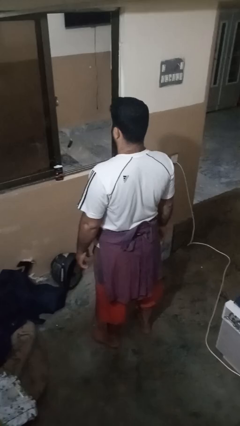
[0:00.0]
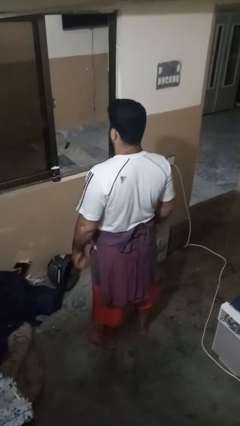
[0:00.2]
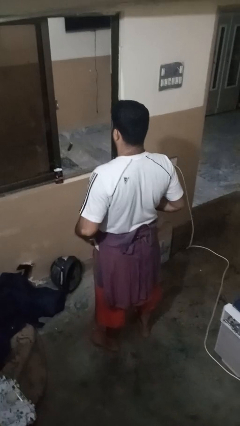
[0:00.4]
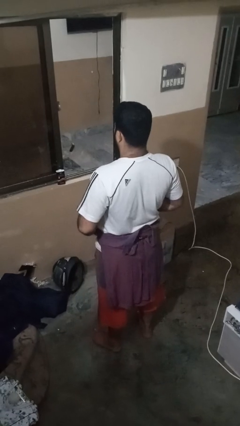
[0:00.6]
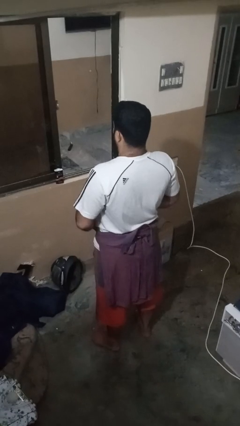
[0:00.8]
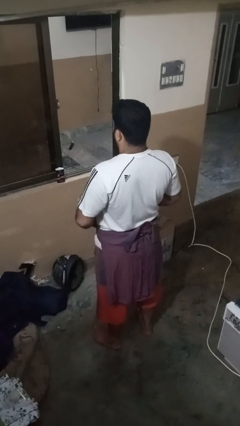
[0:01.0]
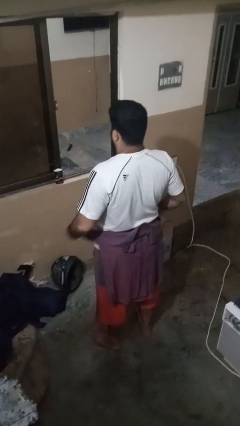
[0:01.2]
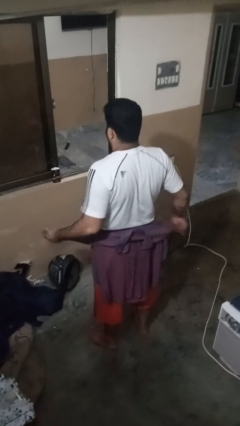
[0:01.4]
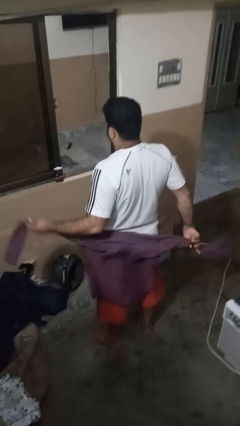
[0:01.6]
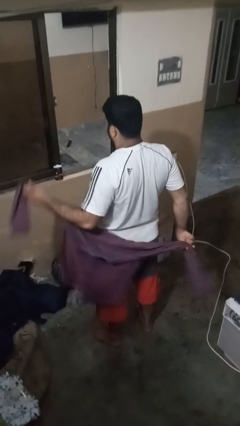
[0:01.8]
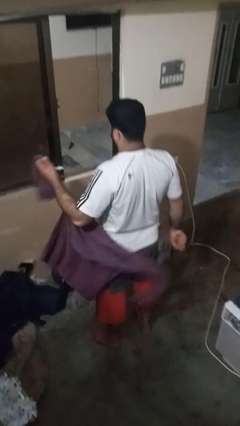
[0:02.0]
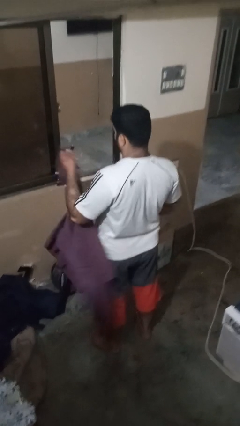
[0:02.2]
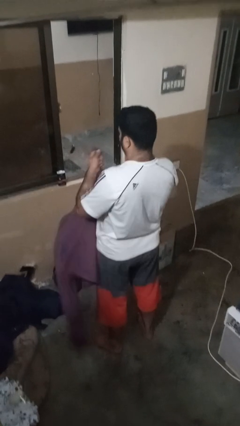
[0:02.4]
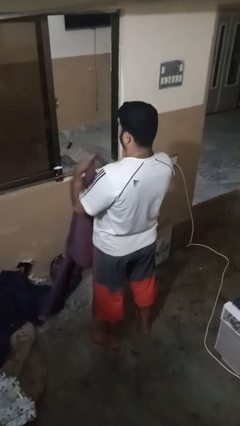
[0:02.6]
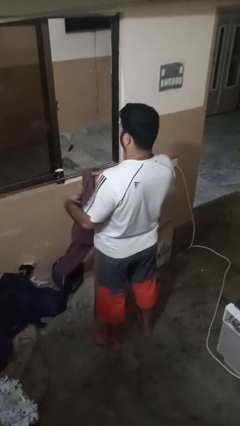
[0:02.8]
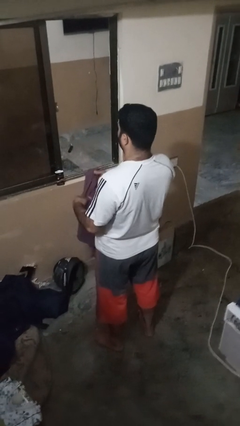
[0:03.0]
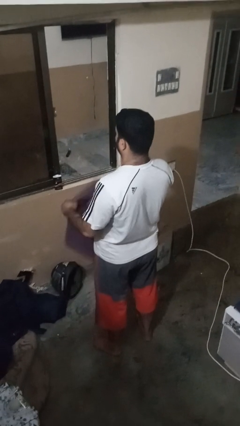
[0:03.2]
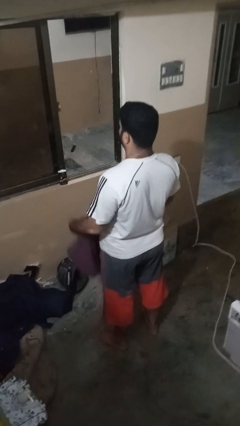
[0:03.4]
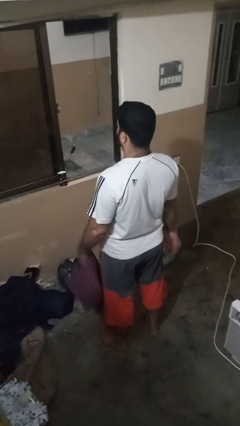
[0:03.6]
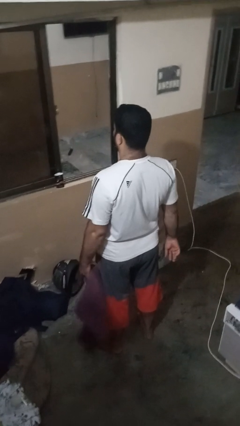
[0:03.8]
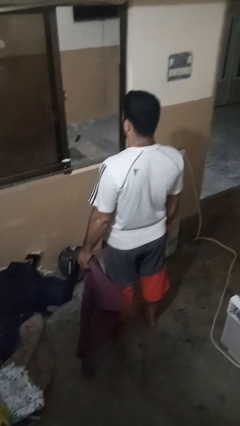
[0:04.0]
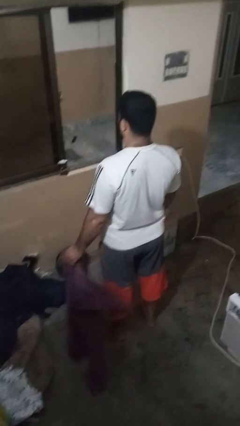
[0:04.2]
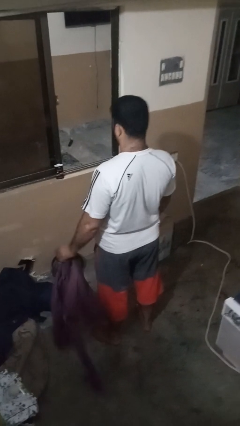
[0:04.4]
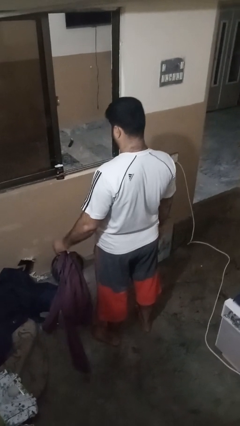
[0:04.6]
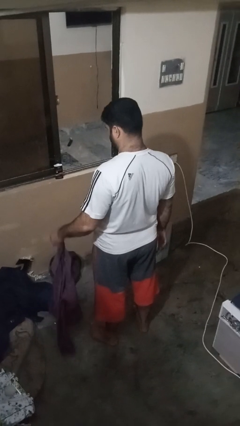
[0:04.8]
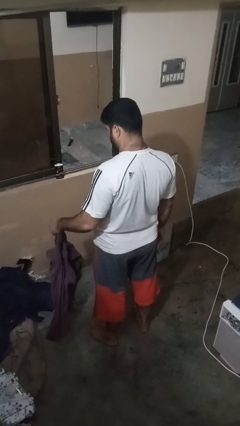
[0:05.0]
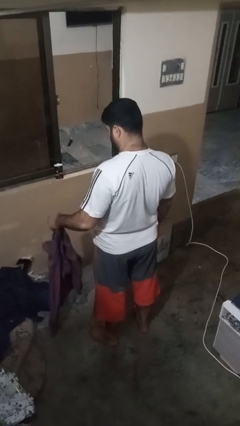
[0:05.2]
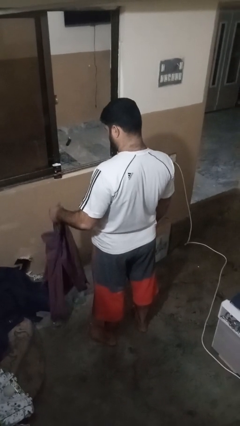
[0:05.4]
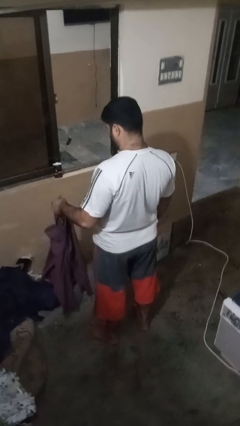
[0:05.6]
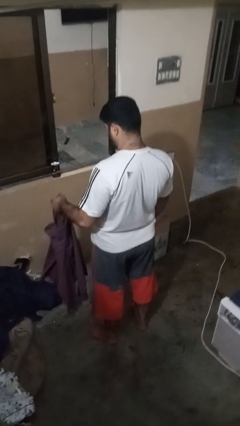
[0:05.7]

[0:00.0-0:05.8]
person unties jacket around waist

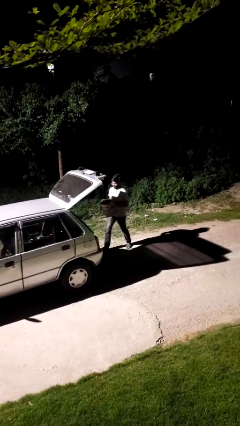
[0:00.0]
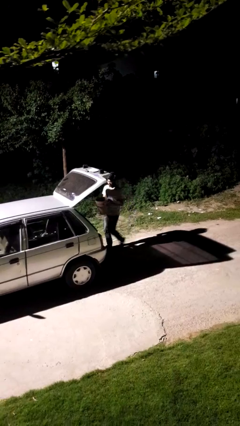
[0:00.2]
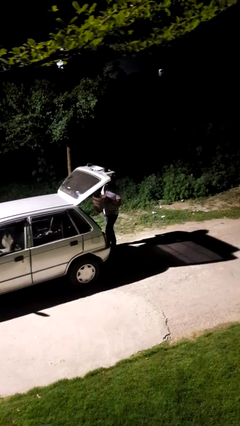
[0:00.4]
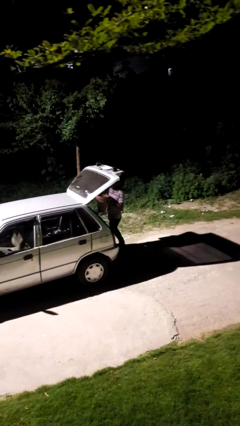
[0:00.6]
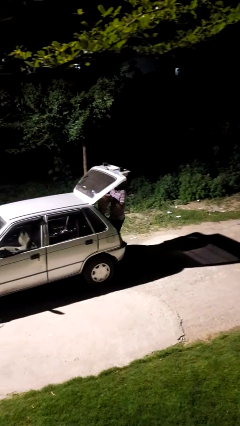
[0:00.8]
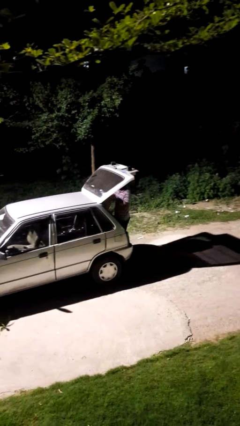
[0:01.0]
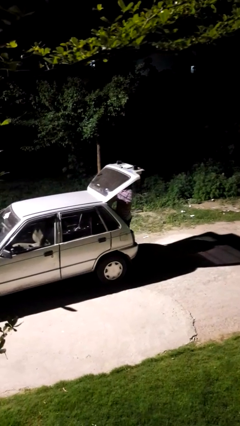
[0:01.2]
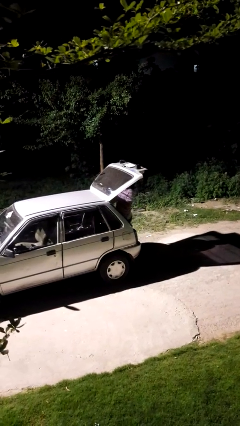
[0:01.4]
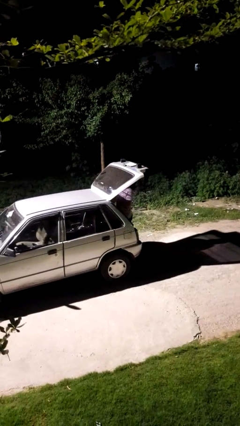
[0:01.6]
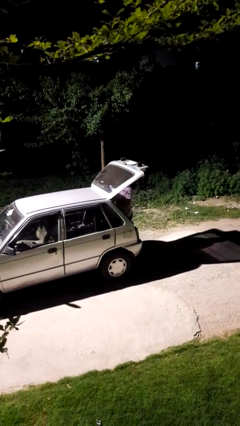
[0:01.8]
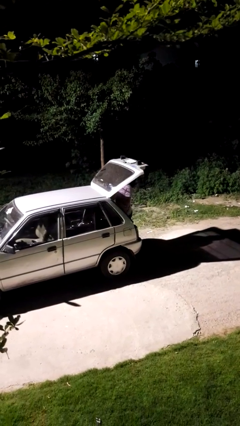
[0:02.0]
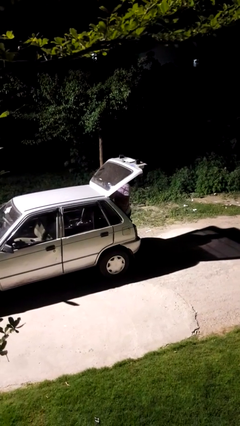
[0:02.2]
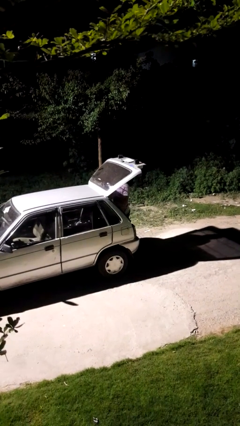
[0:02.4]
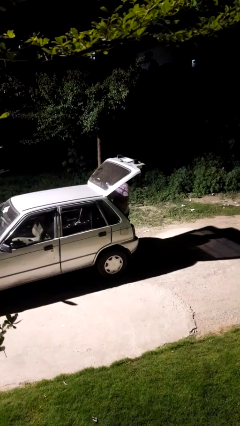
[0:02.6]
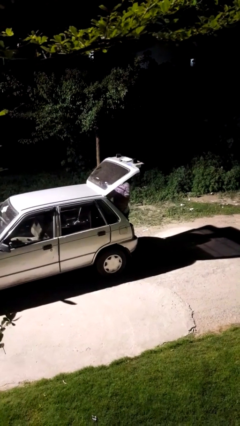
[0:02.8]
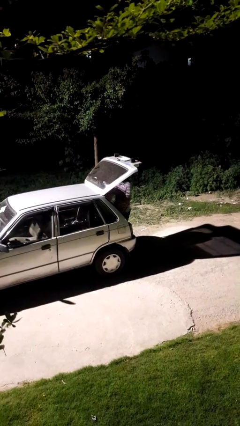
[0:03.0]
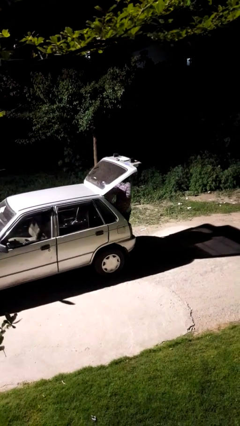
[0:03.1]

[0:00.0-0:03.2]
person loads car

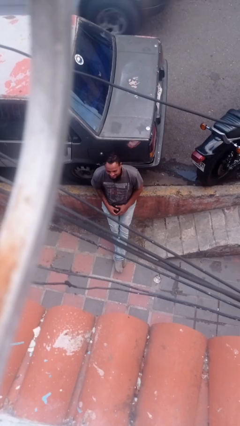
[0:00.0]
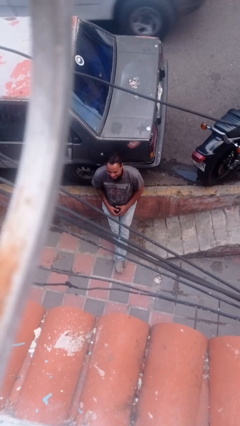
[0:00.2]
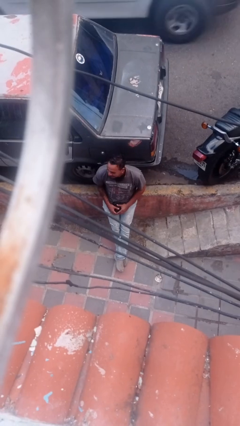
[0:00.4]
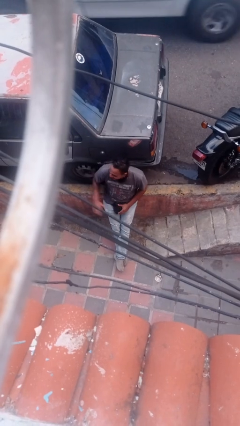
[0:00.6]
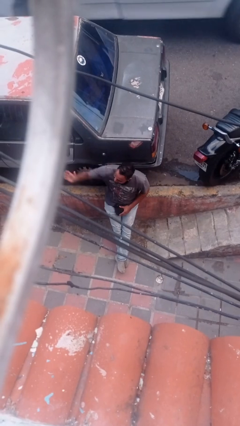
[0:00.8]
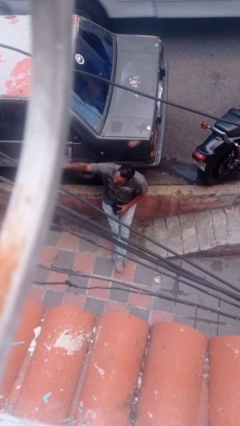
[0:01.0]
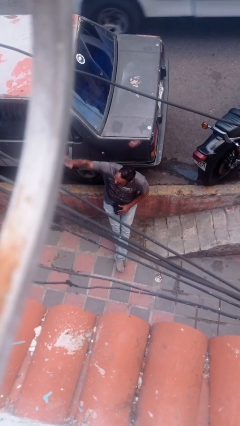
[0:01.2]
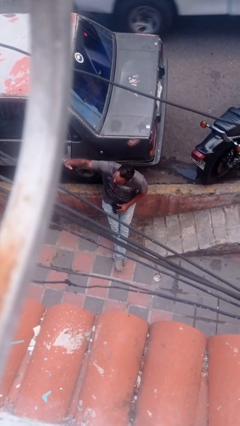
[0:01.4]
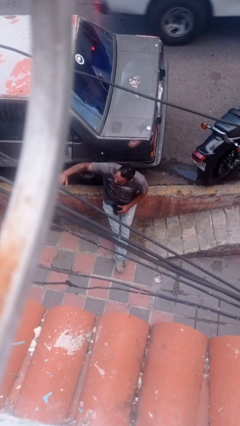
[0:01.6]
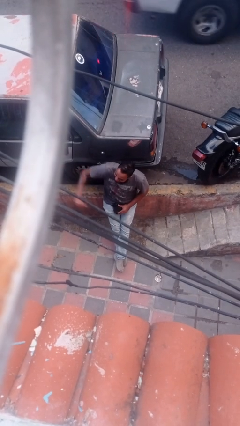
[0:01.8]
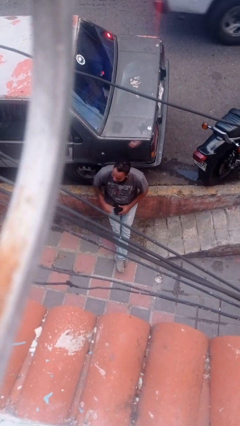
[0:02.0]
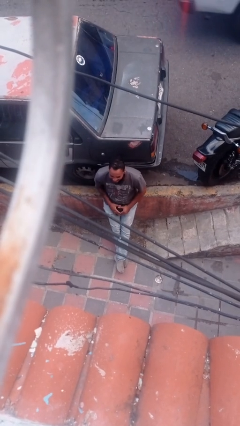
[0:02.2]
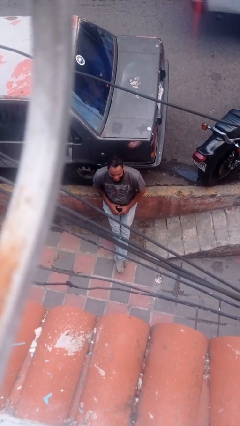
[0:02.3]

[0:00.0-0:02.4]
person waves at person

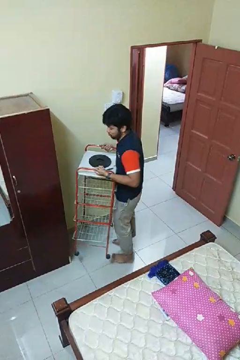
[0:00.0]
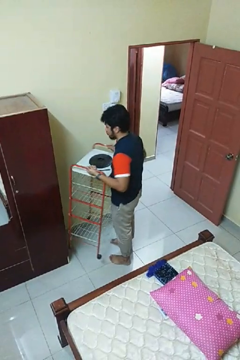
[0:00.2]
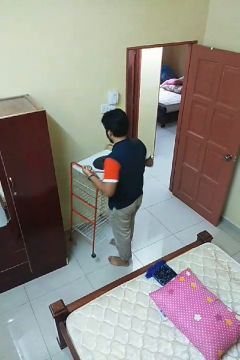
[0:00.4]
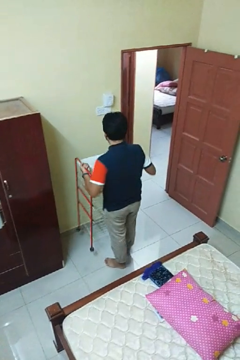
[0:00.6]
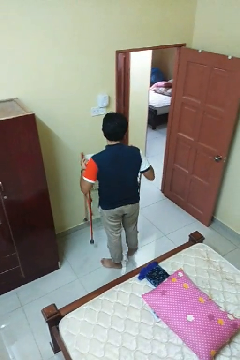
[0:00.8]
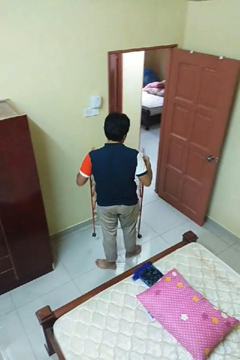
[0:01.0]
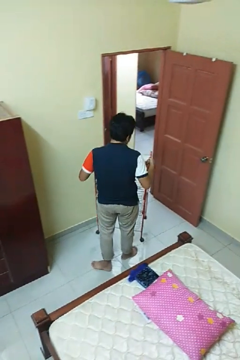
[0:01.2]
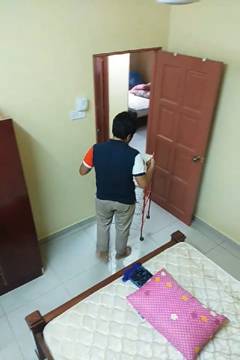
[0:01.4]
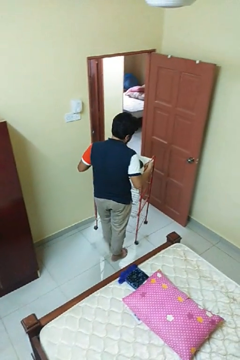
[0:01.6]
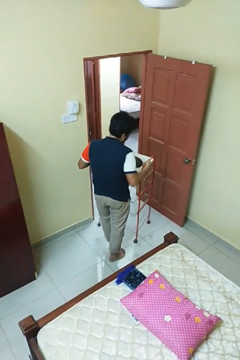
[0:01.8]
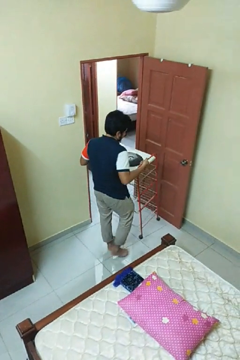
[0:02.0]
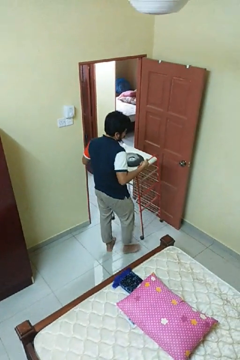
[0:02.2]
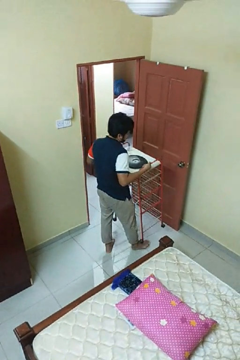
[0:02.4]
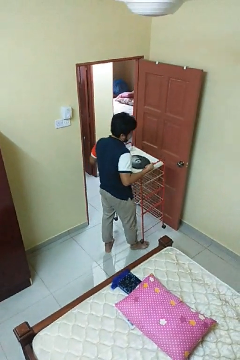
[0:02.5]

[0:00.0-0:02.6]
person carries furniture

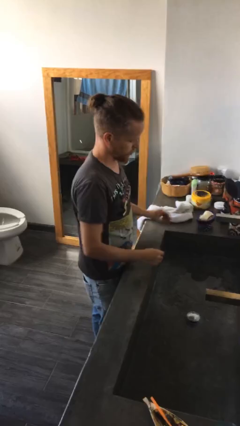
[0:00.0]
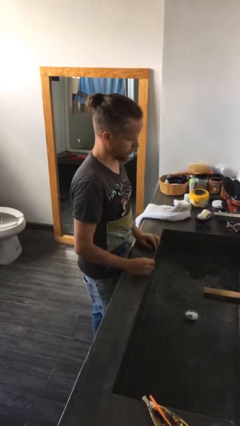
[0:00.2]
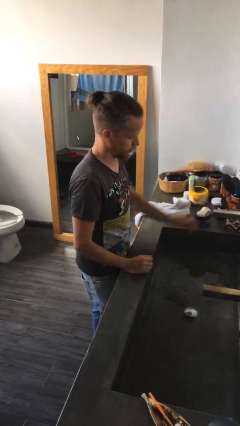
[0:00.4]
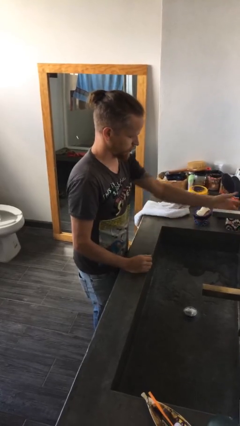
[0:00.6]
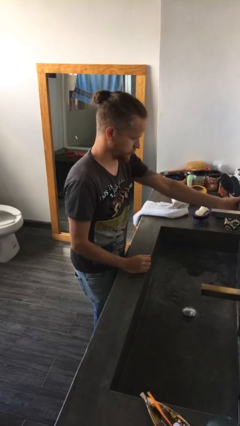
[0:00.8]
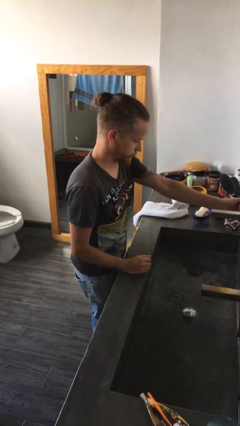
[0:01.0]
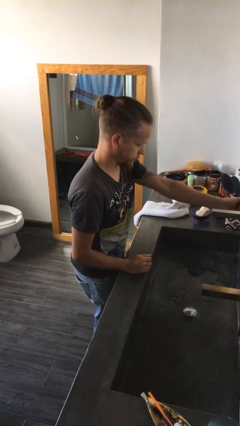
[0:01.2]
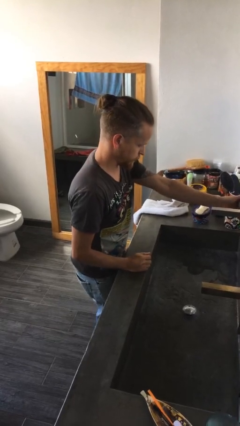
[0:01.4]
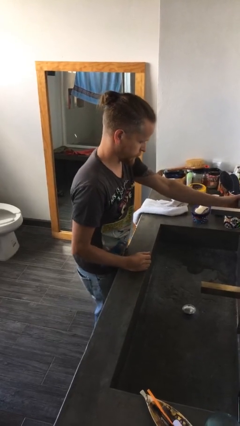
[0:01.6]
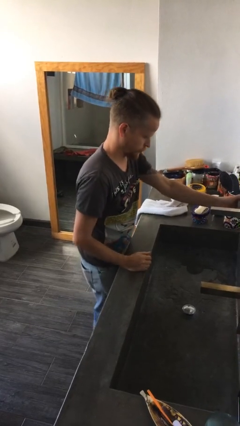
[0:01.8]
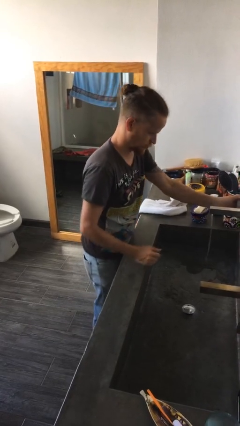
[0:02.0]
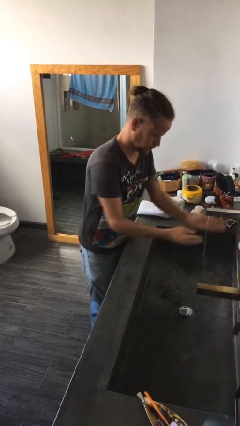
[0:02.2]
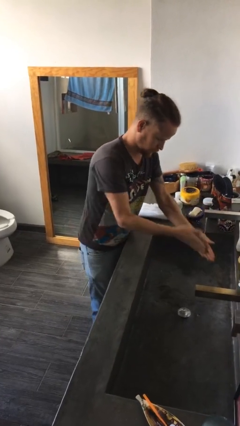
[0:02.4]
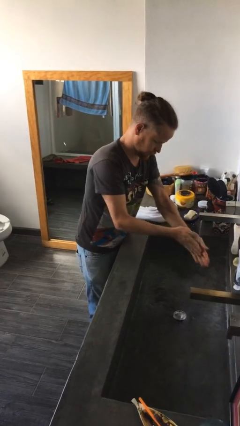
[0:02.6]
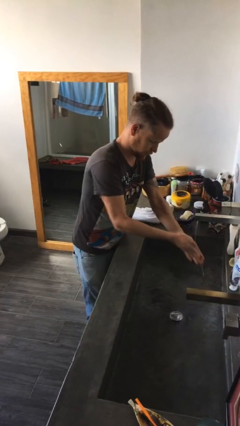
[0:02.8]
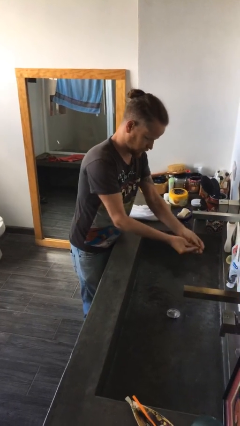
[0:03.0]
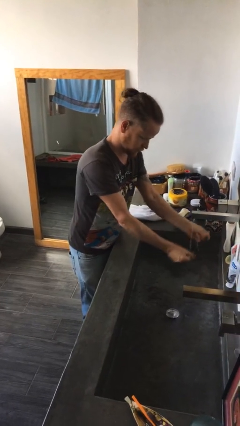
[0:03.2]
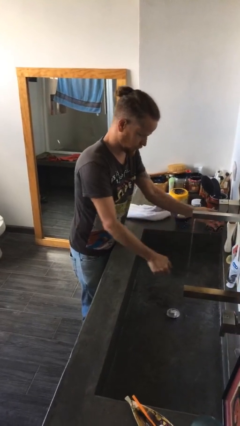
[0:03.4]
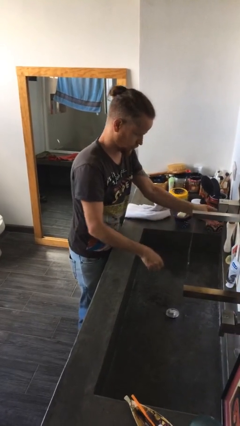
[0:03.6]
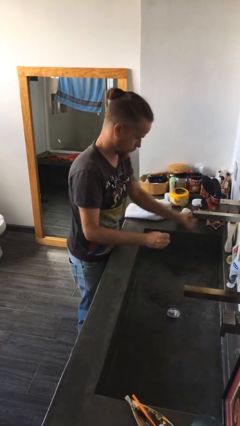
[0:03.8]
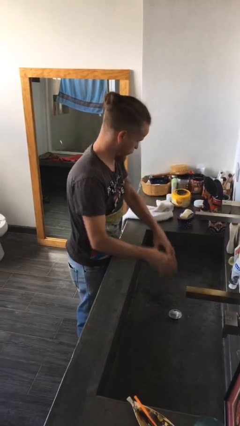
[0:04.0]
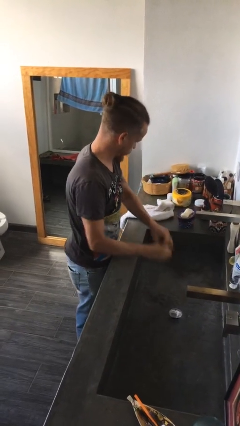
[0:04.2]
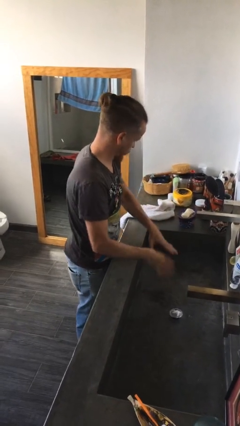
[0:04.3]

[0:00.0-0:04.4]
person washes hands
